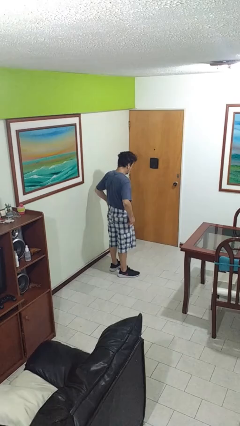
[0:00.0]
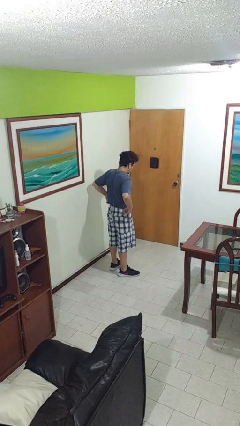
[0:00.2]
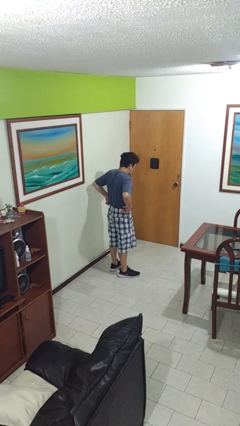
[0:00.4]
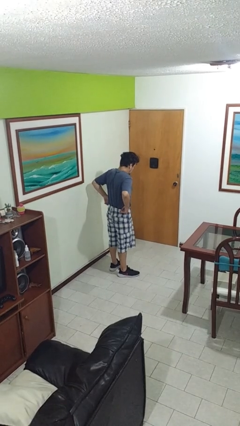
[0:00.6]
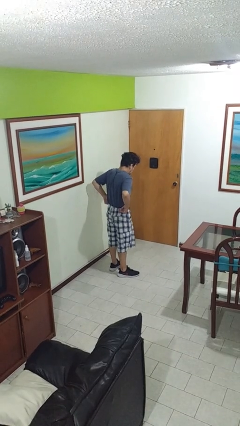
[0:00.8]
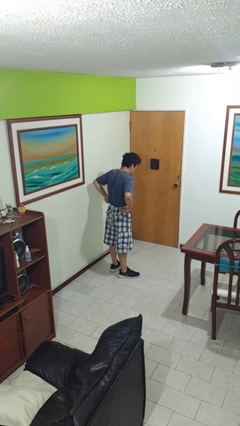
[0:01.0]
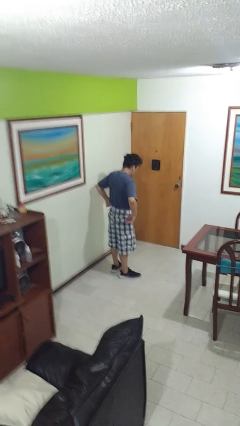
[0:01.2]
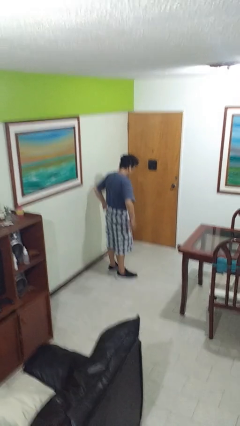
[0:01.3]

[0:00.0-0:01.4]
person hikes up pants

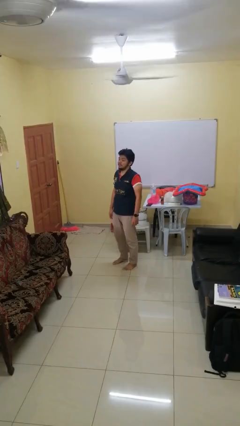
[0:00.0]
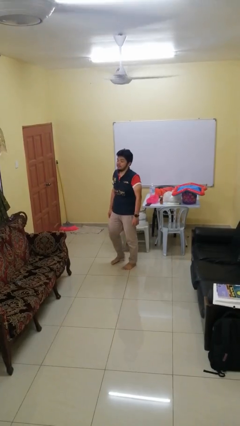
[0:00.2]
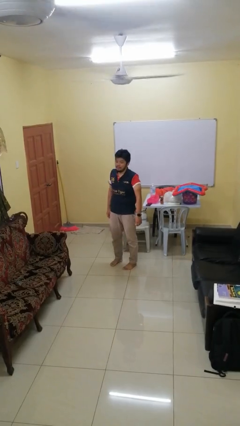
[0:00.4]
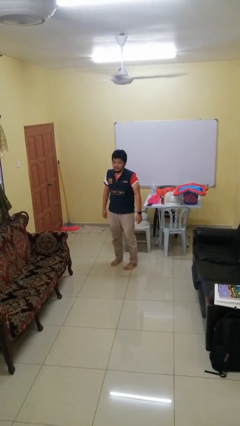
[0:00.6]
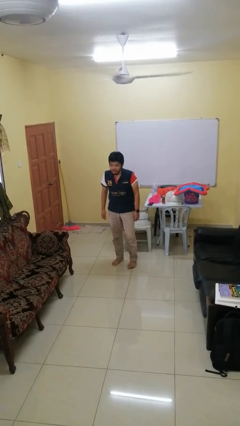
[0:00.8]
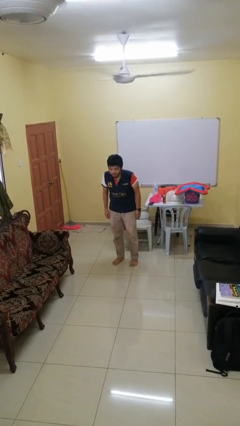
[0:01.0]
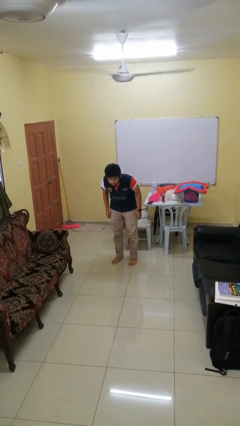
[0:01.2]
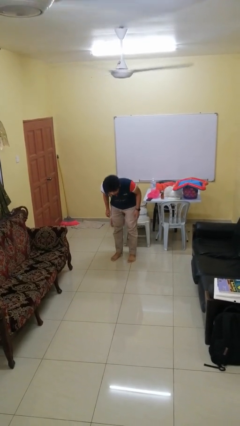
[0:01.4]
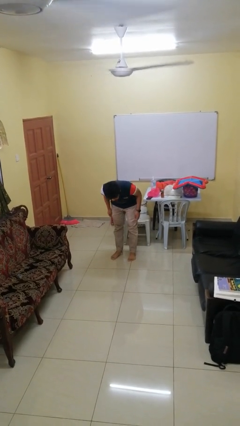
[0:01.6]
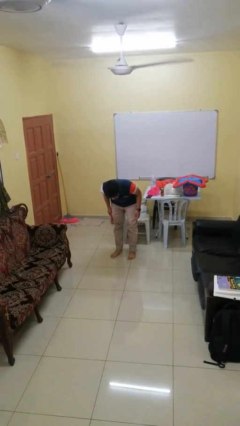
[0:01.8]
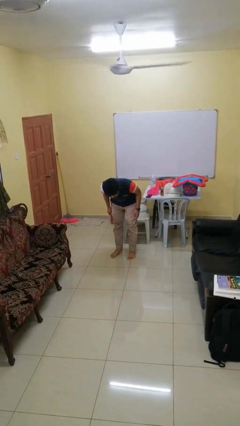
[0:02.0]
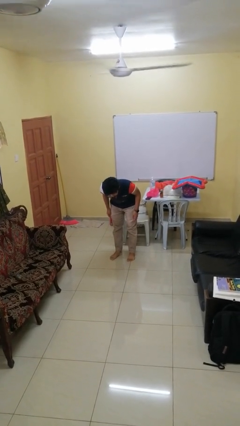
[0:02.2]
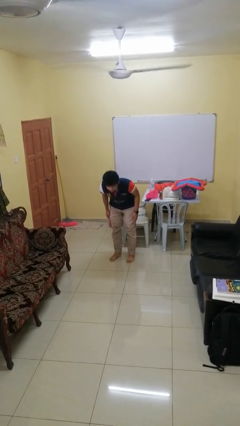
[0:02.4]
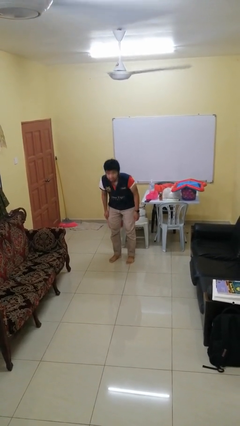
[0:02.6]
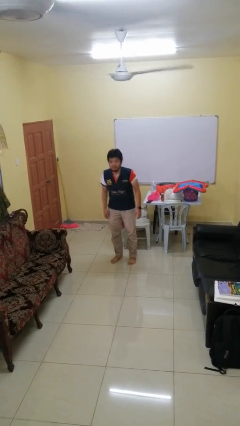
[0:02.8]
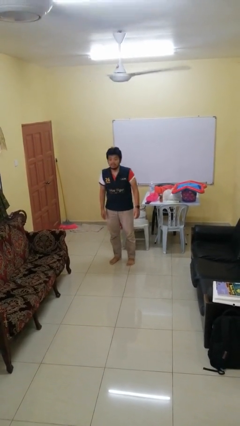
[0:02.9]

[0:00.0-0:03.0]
person bows

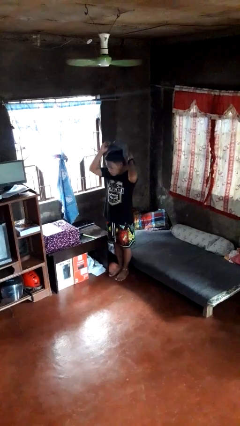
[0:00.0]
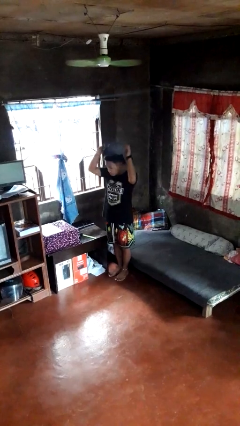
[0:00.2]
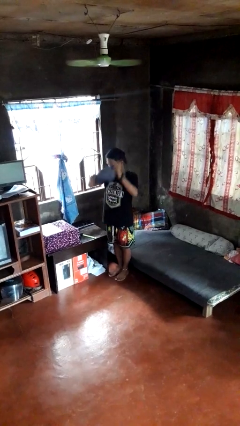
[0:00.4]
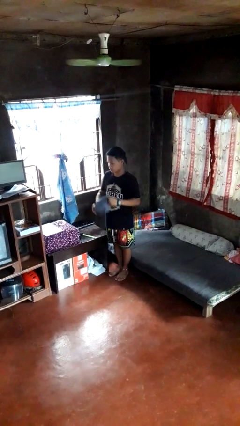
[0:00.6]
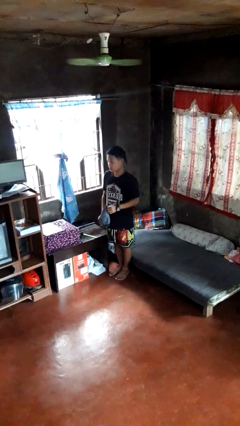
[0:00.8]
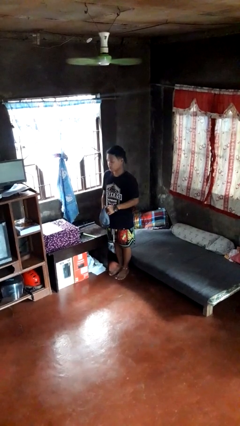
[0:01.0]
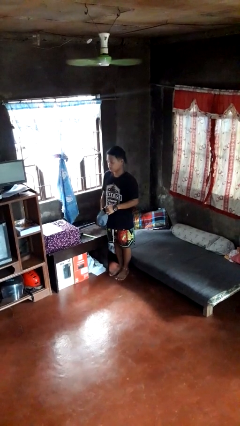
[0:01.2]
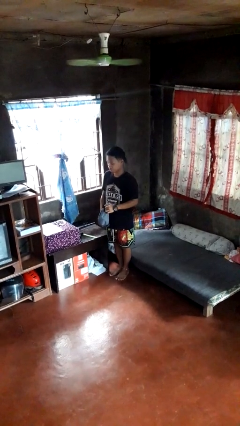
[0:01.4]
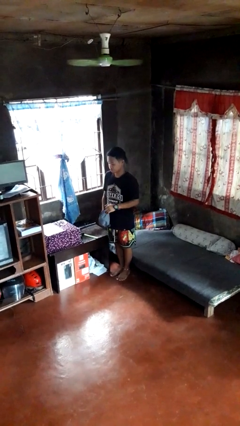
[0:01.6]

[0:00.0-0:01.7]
person takes off hat

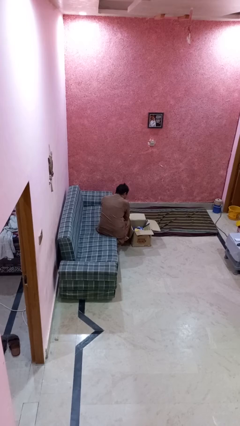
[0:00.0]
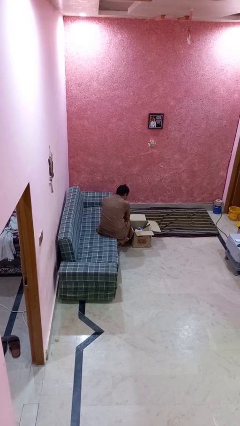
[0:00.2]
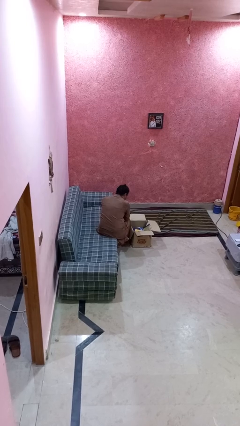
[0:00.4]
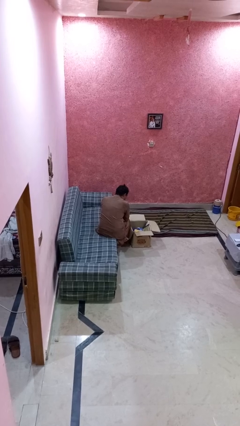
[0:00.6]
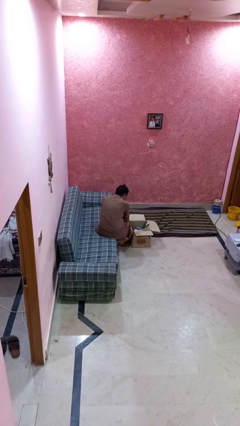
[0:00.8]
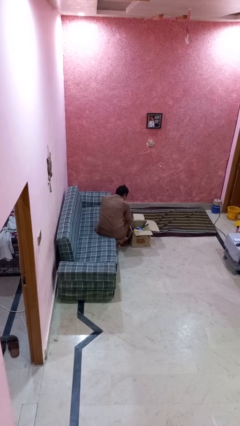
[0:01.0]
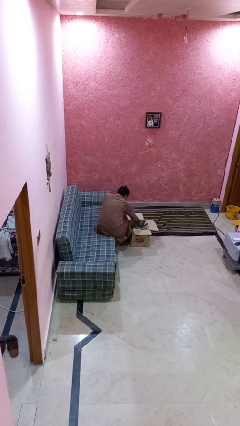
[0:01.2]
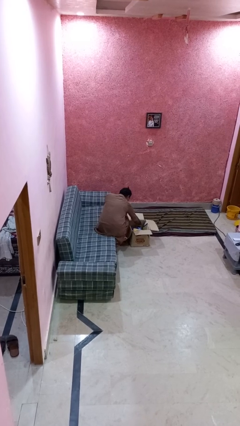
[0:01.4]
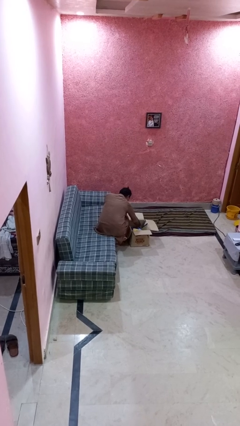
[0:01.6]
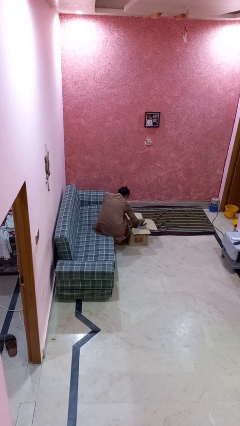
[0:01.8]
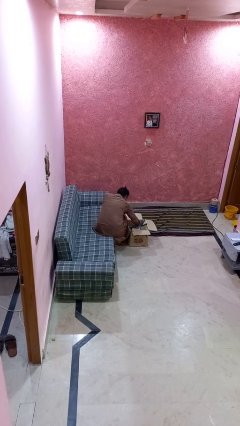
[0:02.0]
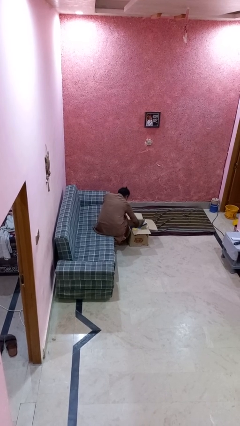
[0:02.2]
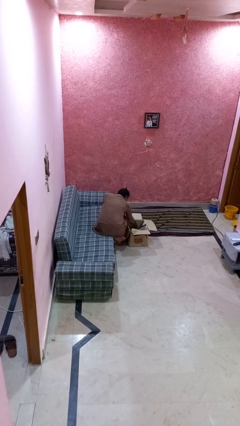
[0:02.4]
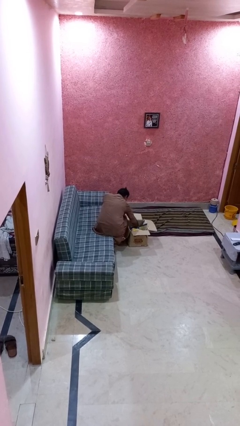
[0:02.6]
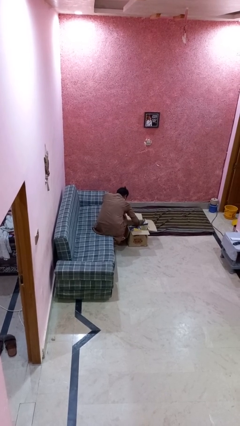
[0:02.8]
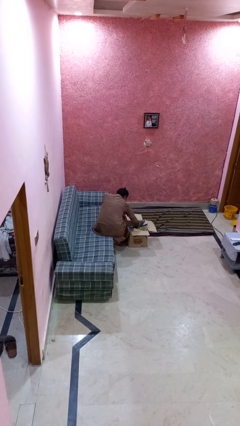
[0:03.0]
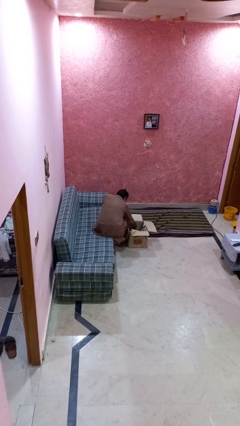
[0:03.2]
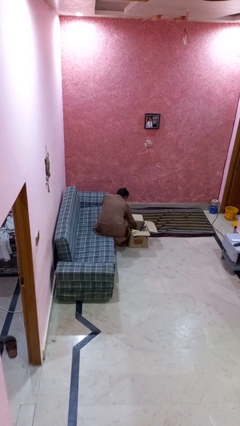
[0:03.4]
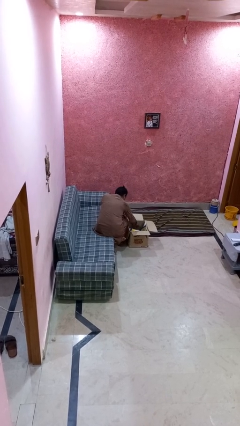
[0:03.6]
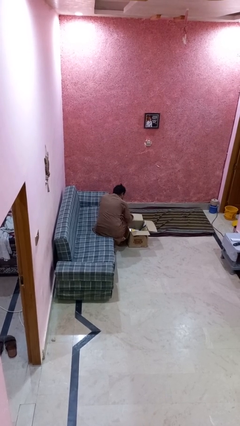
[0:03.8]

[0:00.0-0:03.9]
person searches in box

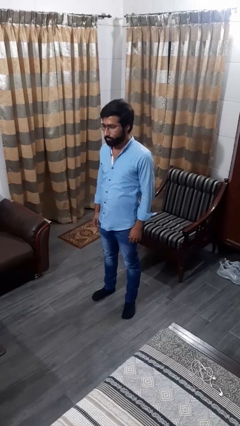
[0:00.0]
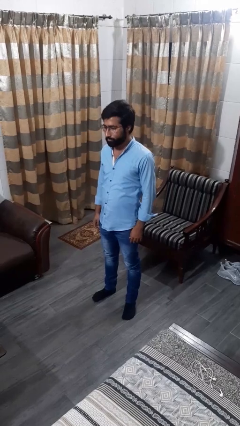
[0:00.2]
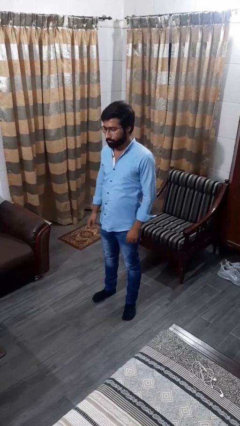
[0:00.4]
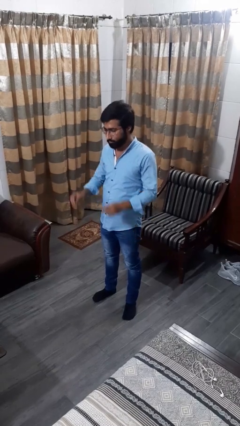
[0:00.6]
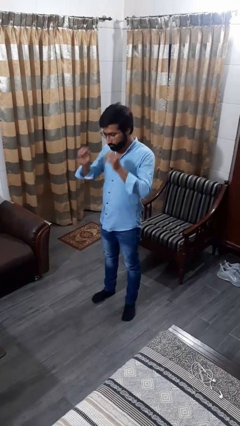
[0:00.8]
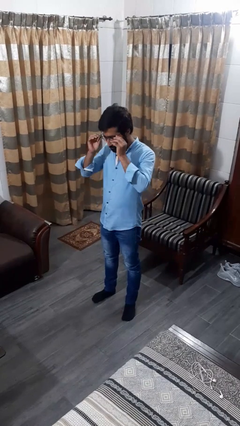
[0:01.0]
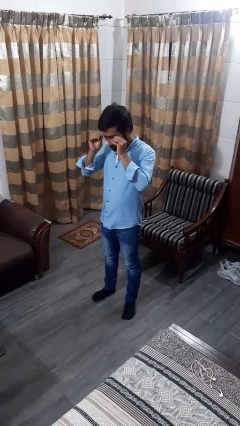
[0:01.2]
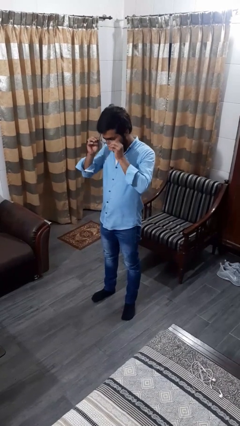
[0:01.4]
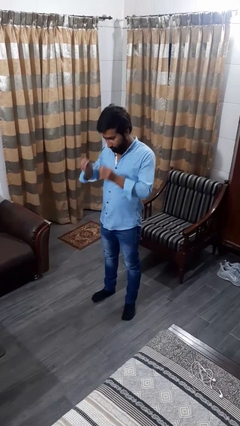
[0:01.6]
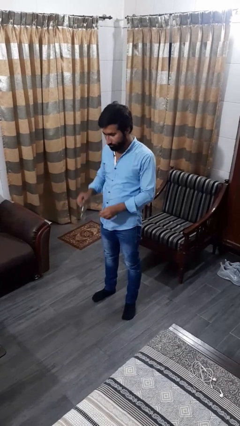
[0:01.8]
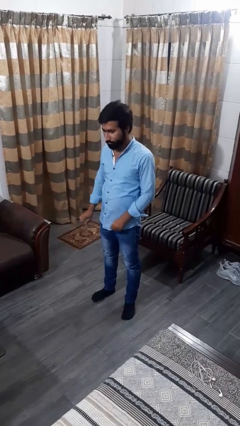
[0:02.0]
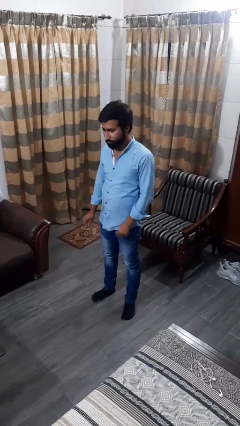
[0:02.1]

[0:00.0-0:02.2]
person takes off glasses

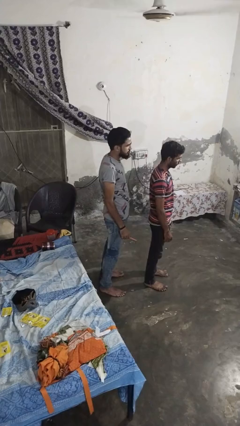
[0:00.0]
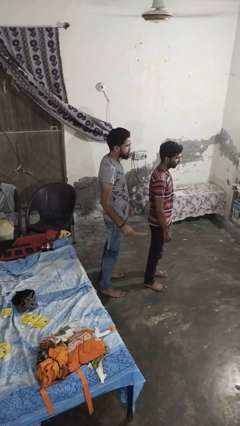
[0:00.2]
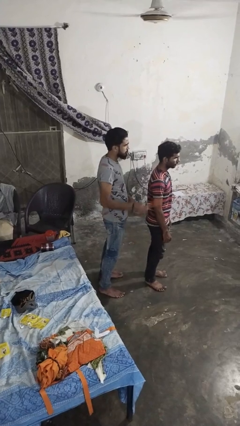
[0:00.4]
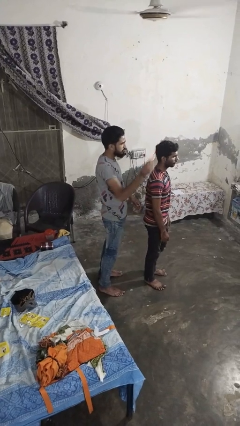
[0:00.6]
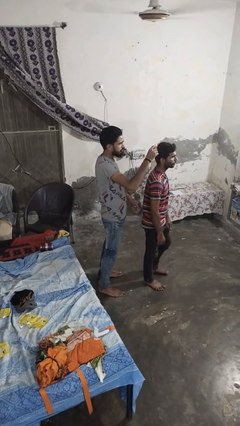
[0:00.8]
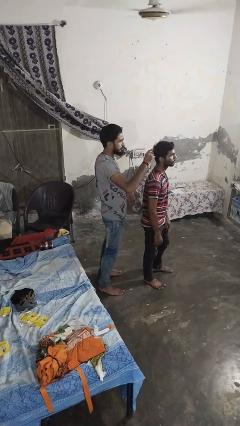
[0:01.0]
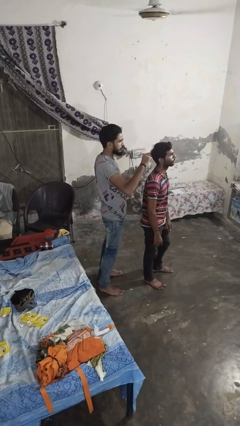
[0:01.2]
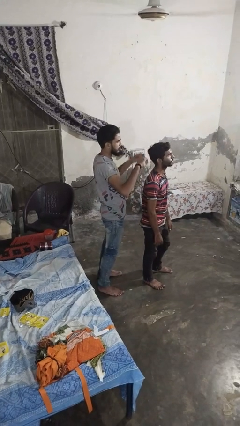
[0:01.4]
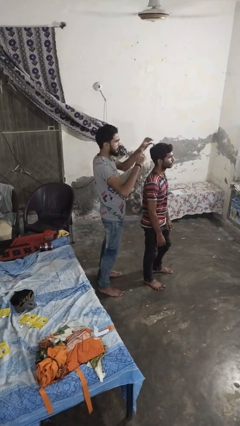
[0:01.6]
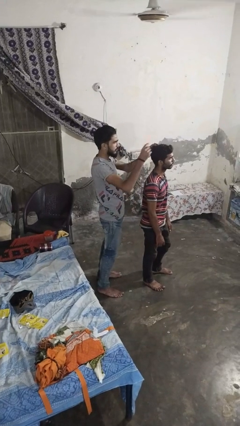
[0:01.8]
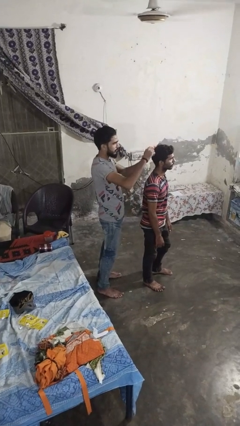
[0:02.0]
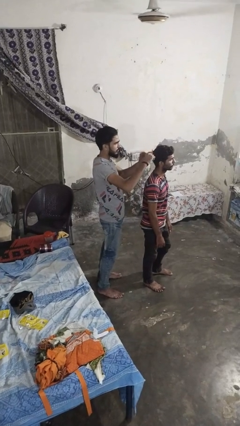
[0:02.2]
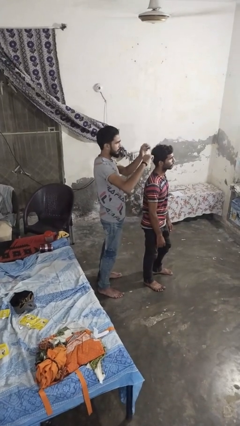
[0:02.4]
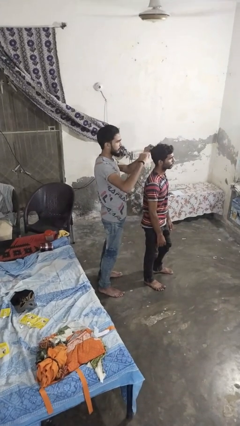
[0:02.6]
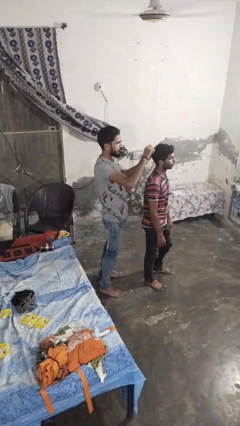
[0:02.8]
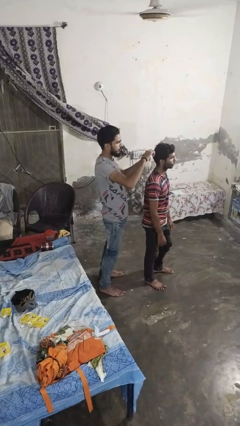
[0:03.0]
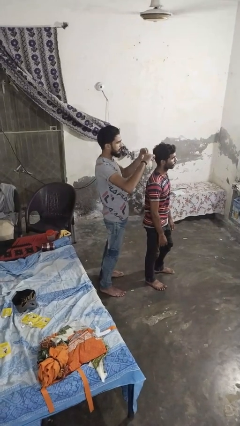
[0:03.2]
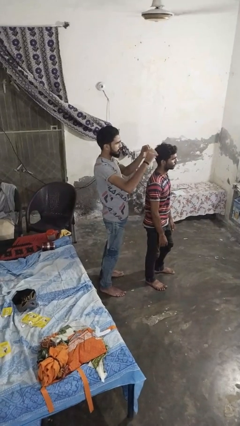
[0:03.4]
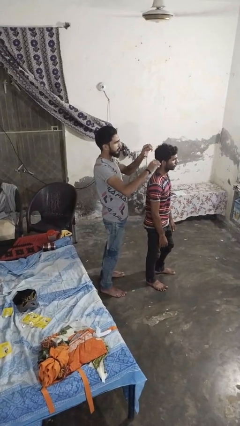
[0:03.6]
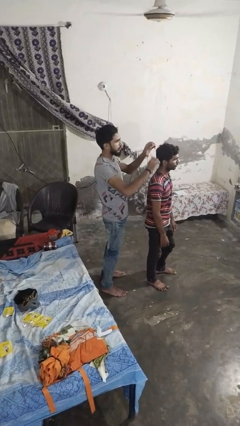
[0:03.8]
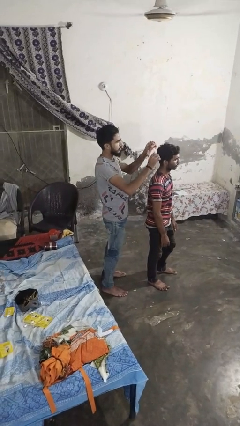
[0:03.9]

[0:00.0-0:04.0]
person brushes hair of person

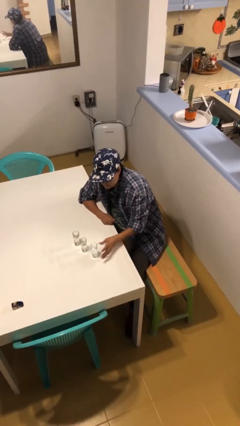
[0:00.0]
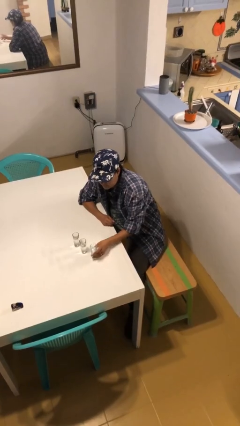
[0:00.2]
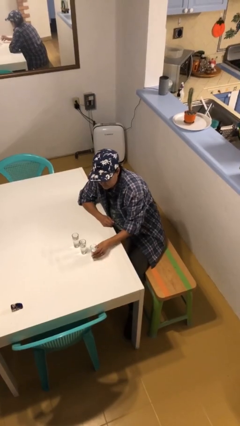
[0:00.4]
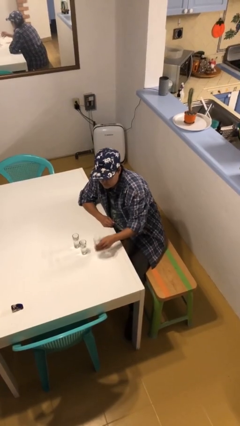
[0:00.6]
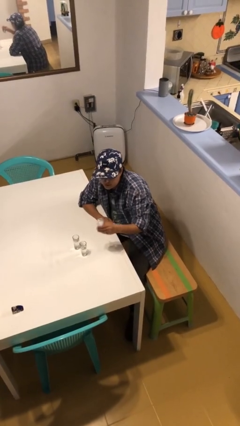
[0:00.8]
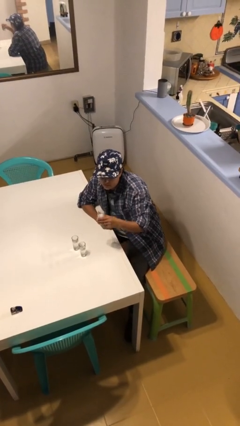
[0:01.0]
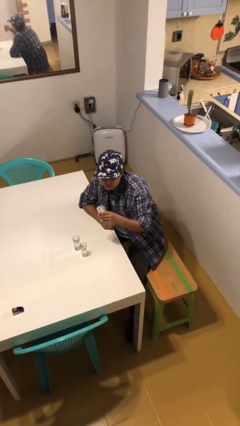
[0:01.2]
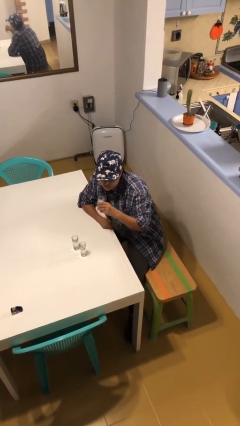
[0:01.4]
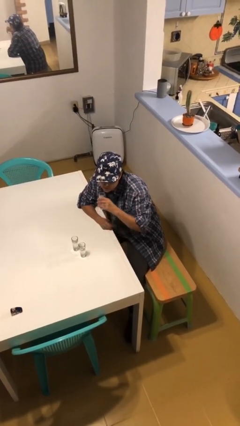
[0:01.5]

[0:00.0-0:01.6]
person picks up object from table
